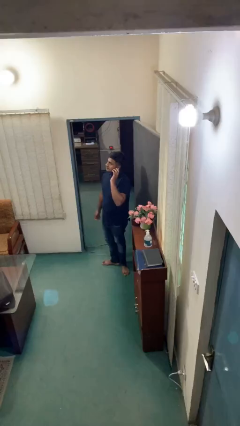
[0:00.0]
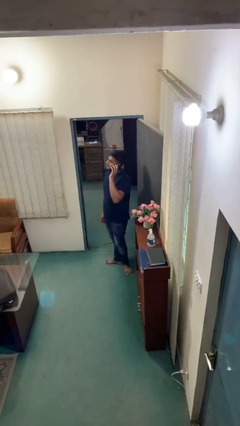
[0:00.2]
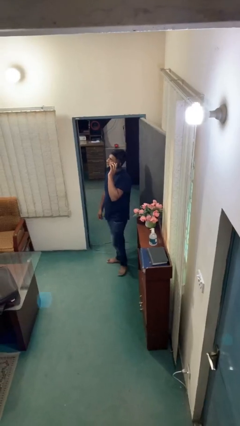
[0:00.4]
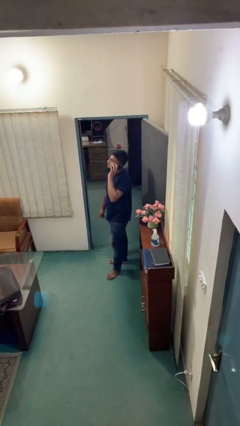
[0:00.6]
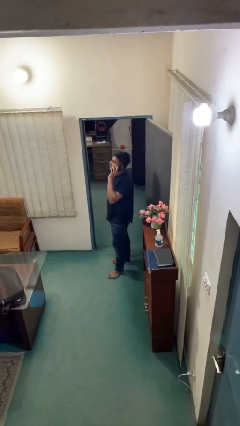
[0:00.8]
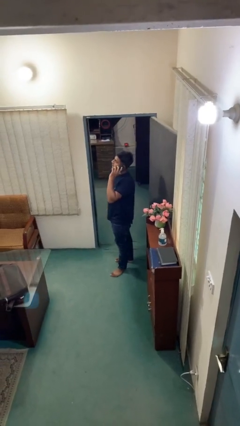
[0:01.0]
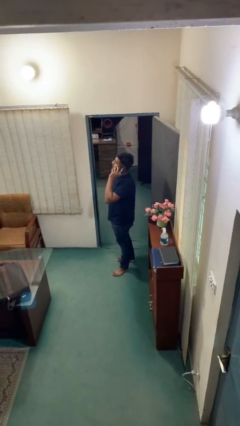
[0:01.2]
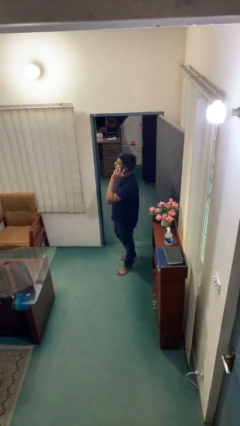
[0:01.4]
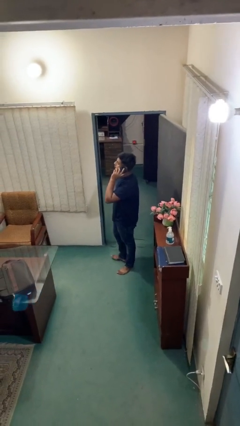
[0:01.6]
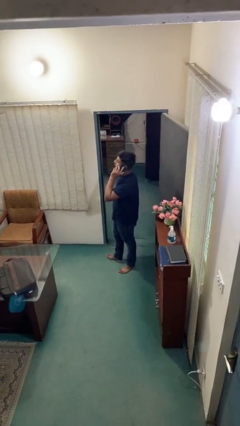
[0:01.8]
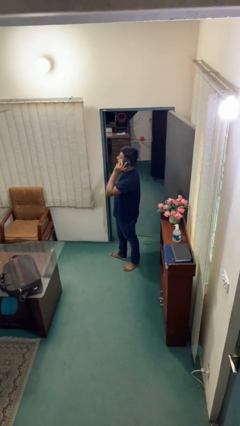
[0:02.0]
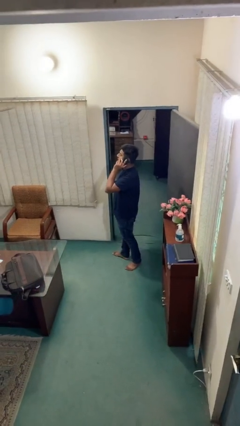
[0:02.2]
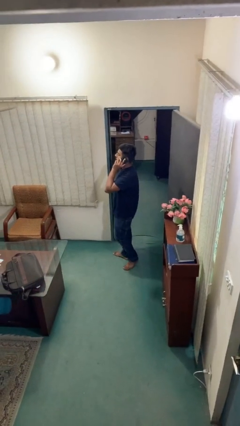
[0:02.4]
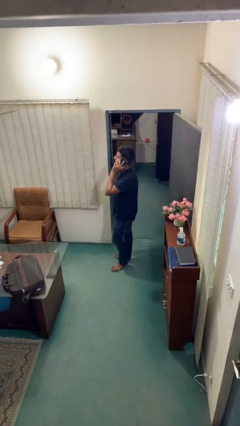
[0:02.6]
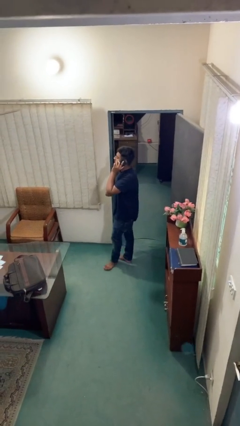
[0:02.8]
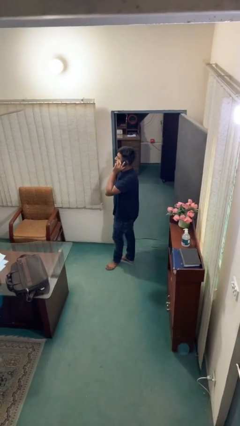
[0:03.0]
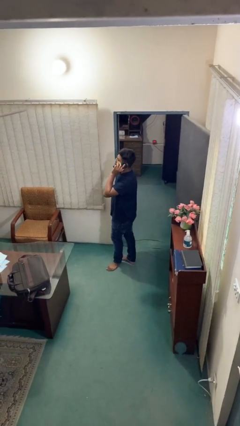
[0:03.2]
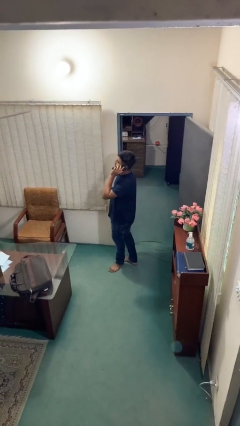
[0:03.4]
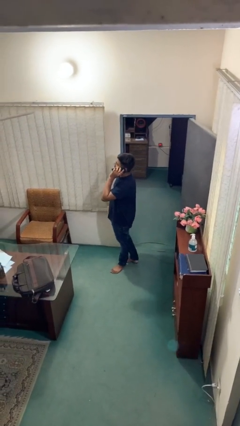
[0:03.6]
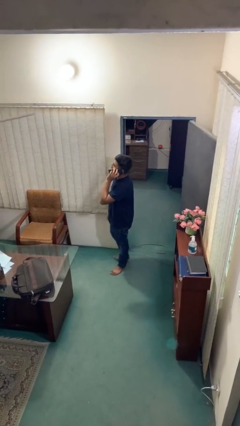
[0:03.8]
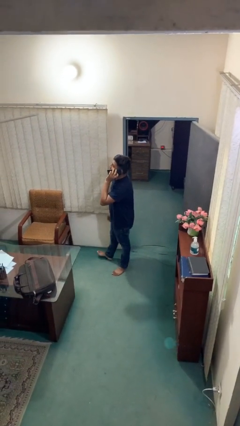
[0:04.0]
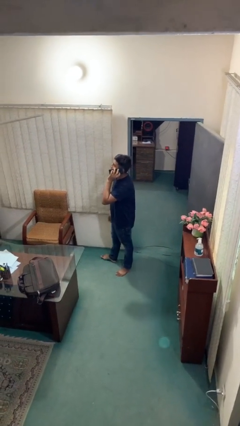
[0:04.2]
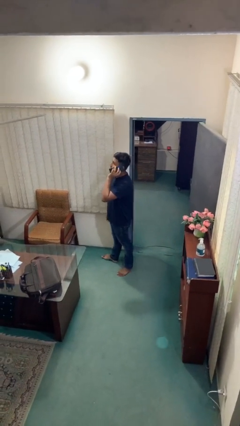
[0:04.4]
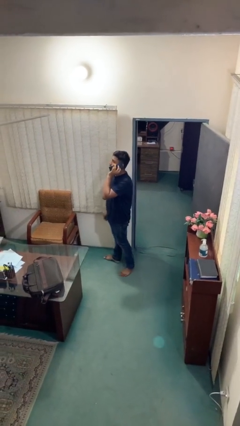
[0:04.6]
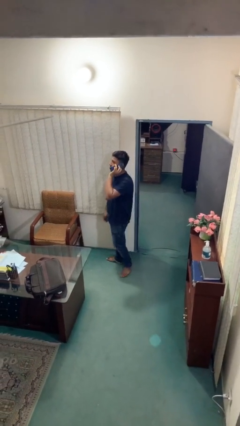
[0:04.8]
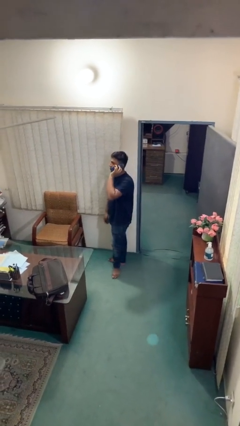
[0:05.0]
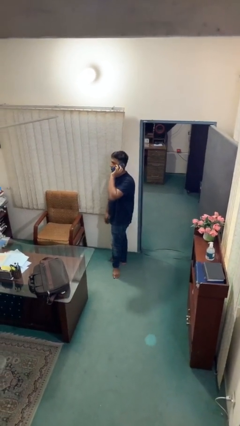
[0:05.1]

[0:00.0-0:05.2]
person talks on phone

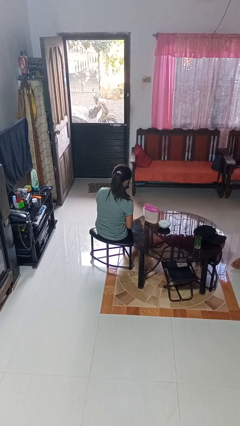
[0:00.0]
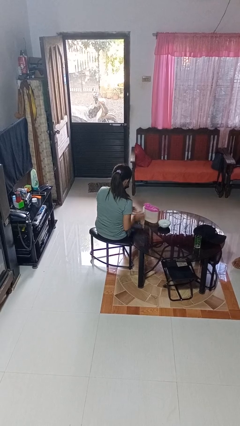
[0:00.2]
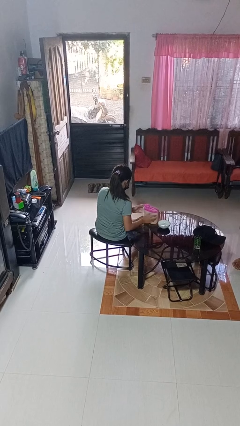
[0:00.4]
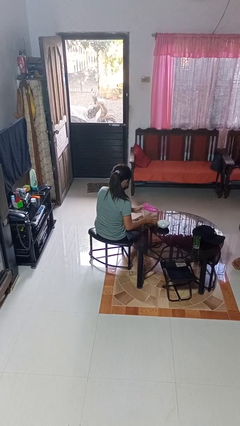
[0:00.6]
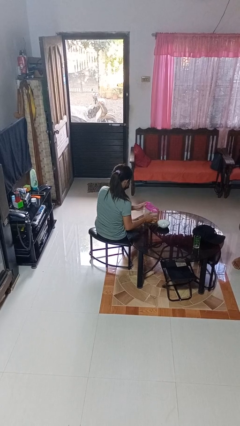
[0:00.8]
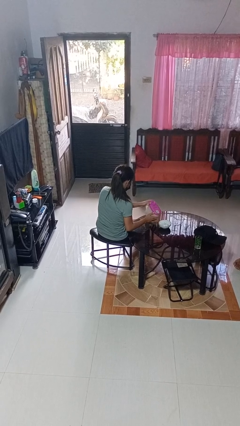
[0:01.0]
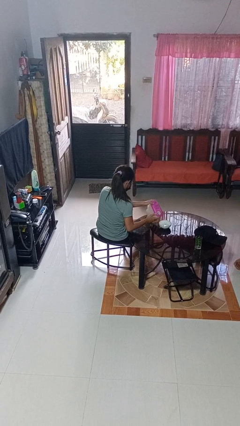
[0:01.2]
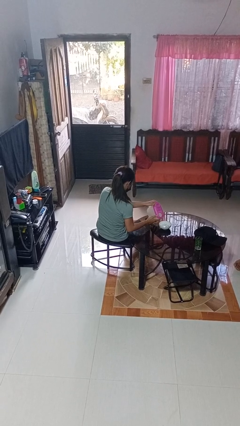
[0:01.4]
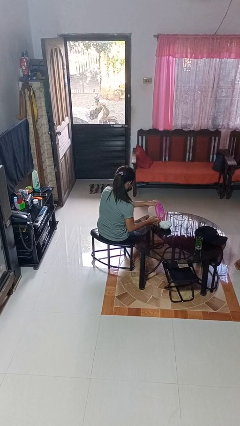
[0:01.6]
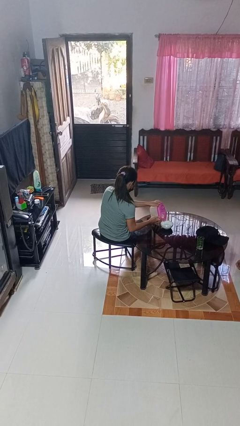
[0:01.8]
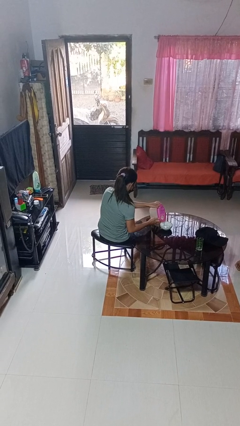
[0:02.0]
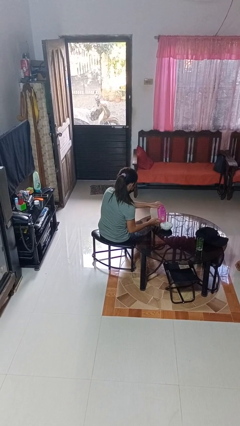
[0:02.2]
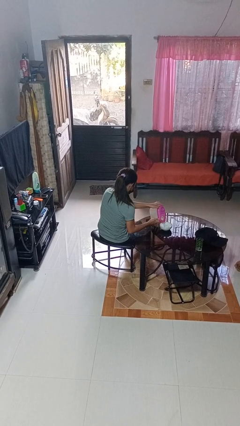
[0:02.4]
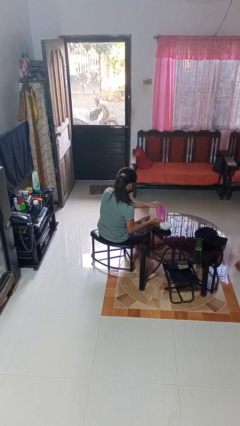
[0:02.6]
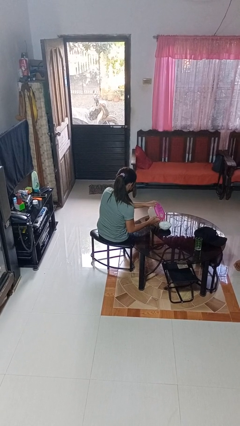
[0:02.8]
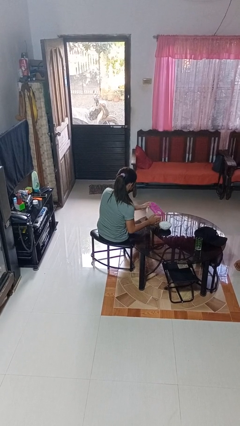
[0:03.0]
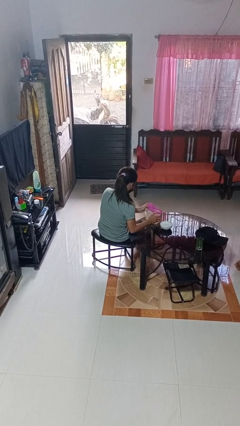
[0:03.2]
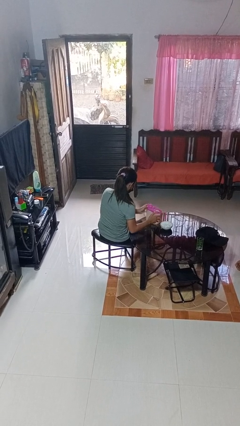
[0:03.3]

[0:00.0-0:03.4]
person pours into bowl

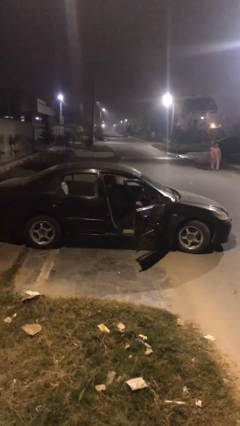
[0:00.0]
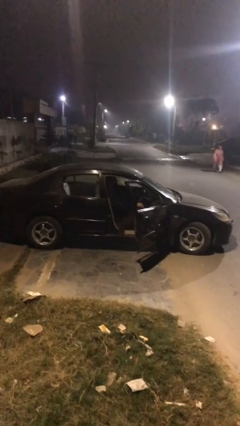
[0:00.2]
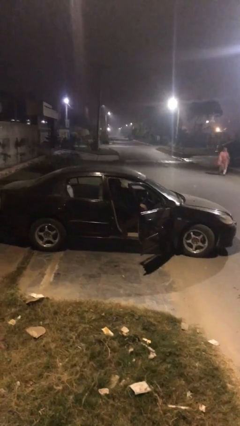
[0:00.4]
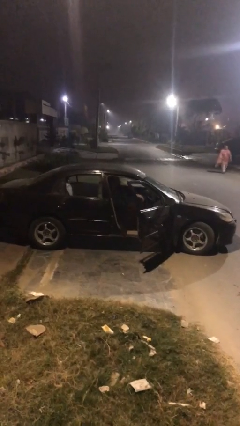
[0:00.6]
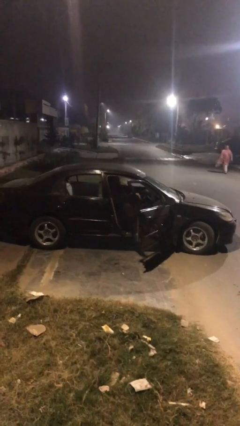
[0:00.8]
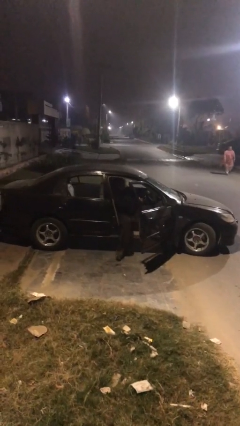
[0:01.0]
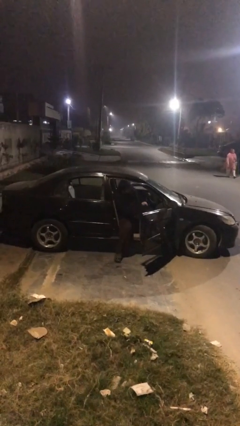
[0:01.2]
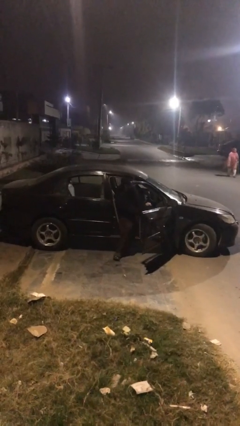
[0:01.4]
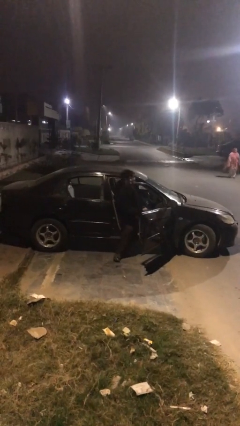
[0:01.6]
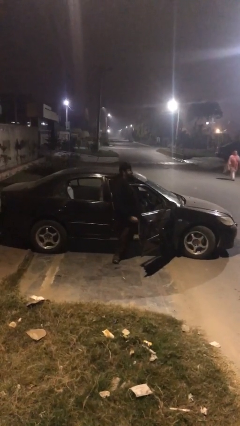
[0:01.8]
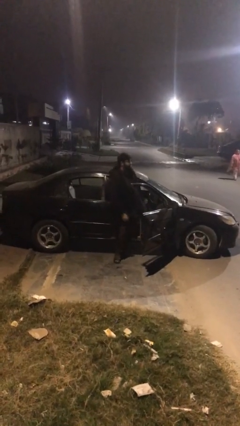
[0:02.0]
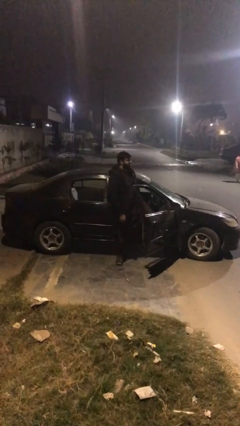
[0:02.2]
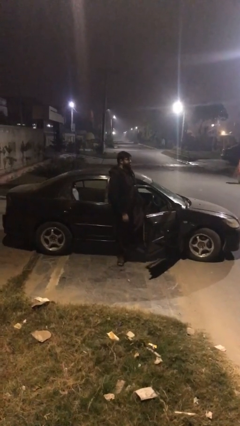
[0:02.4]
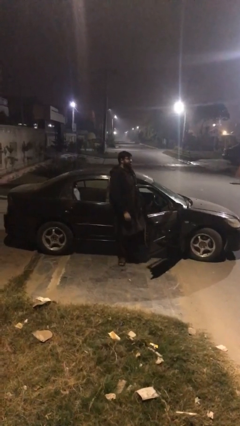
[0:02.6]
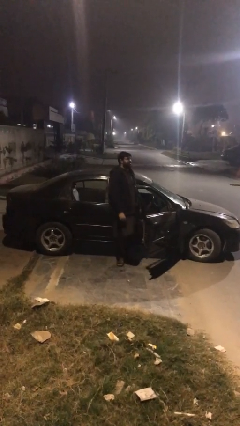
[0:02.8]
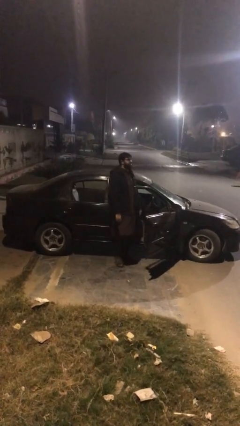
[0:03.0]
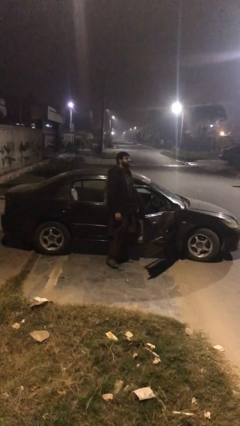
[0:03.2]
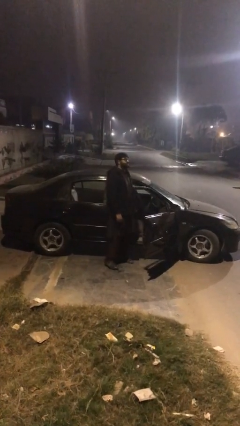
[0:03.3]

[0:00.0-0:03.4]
person exits car

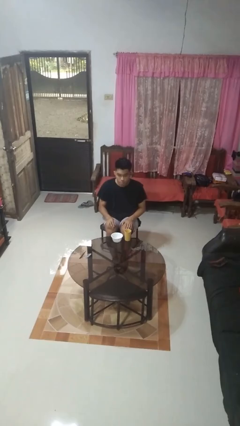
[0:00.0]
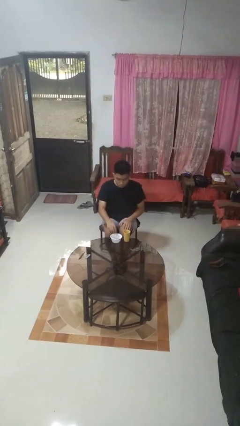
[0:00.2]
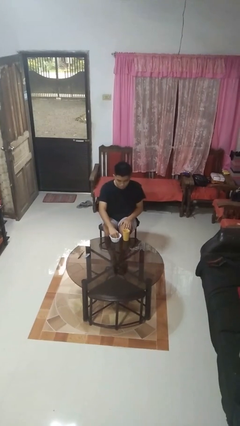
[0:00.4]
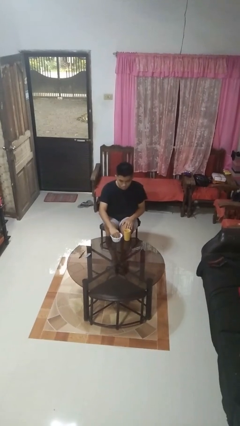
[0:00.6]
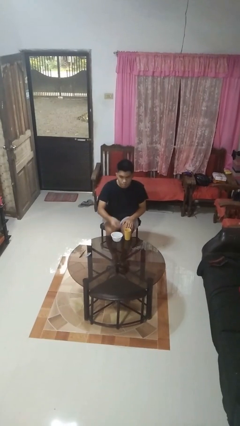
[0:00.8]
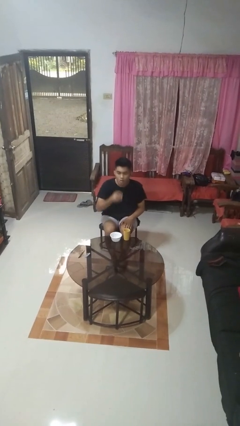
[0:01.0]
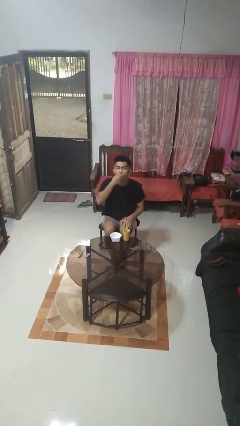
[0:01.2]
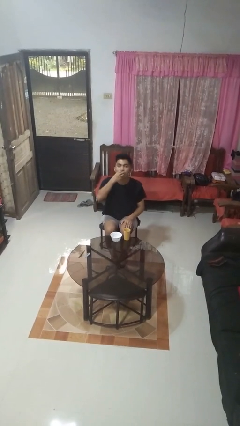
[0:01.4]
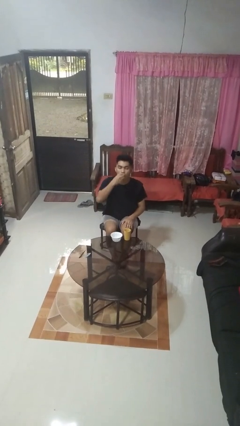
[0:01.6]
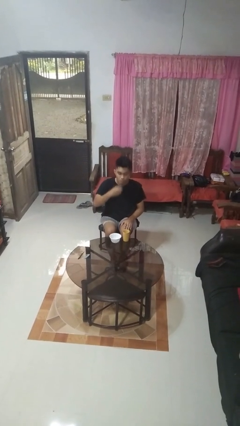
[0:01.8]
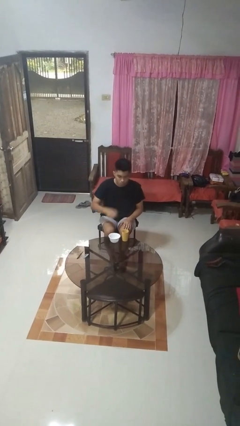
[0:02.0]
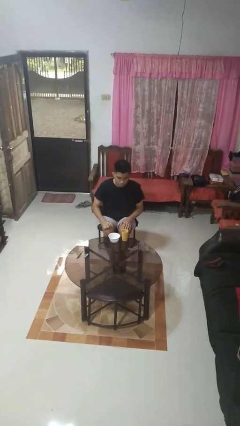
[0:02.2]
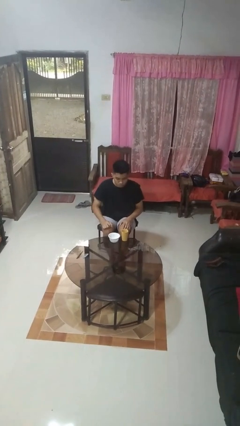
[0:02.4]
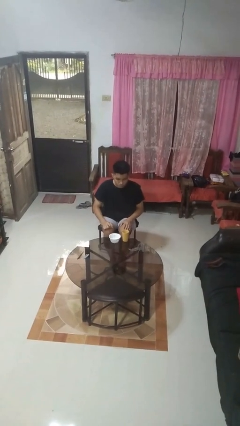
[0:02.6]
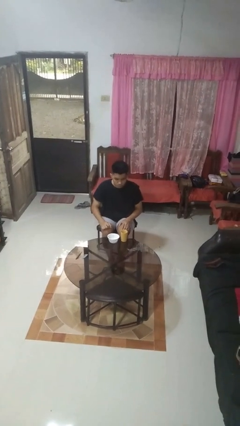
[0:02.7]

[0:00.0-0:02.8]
person takes medicine pills

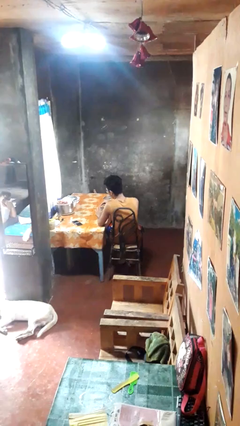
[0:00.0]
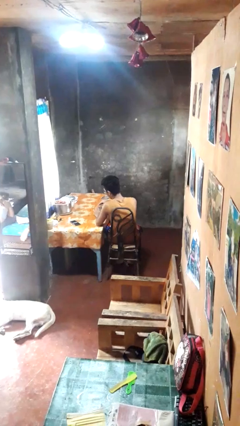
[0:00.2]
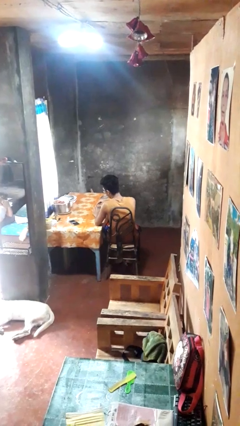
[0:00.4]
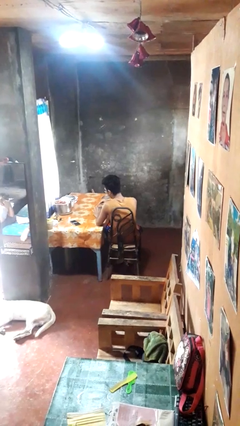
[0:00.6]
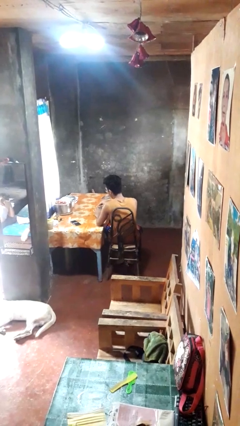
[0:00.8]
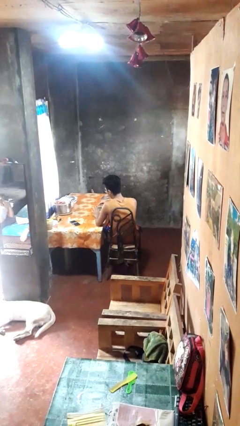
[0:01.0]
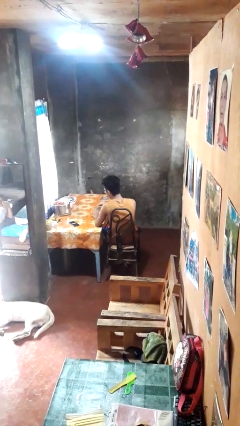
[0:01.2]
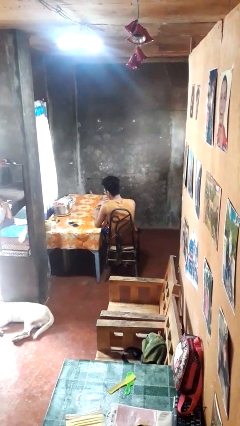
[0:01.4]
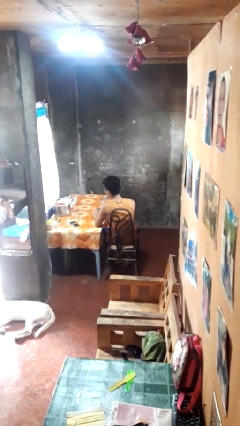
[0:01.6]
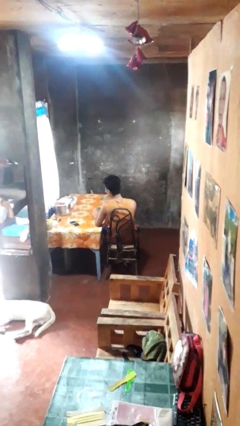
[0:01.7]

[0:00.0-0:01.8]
person files fingernails

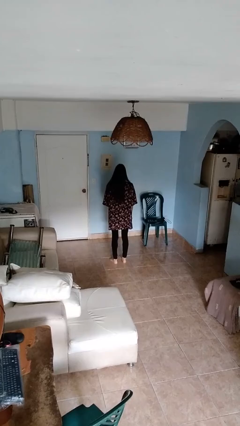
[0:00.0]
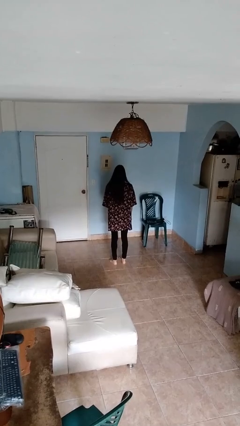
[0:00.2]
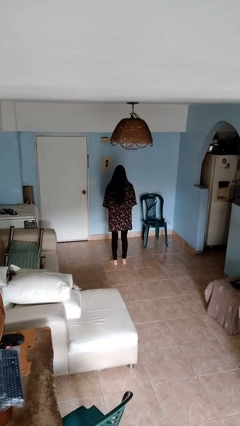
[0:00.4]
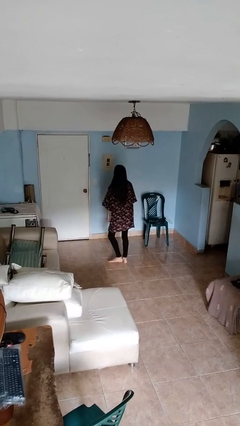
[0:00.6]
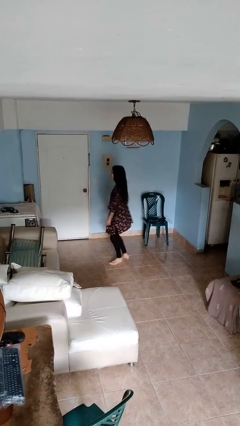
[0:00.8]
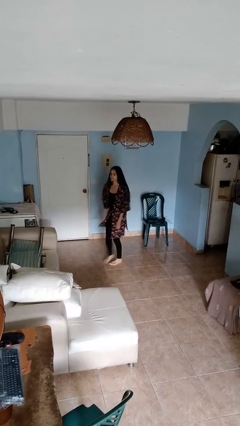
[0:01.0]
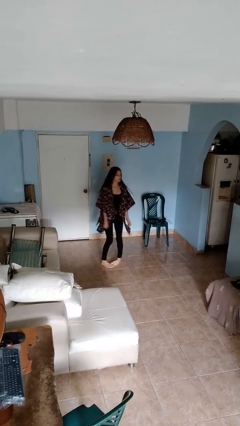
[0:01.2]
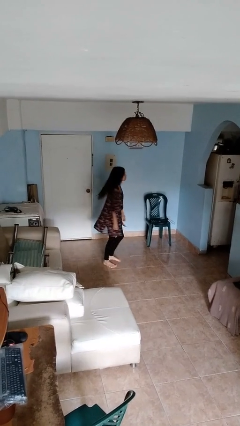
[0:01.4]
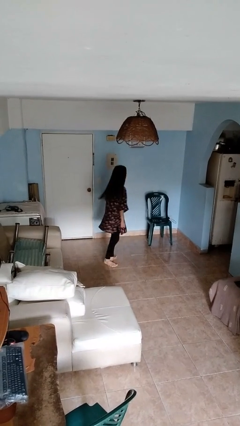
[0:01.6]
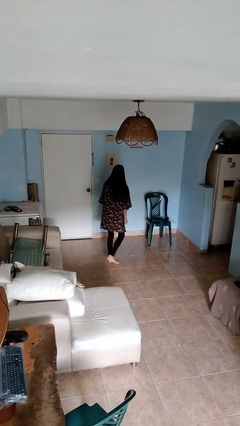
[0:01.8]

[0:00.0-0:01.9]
person twirls
